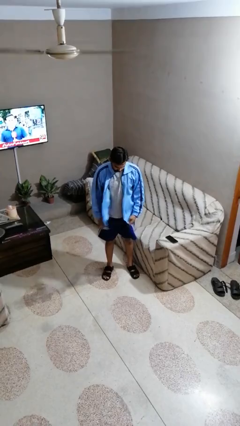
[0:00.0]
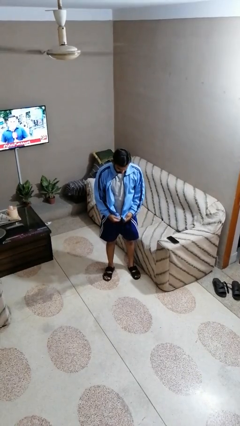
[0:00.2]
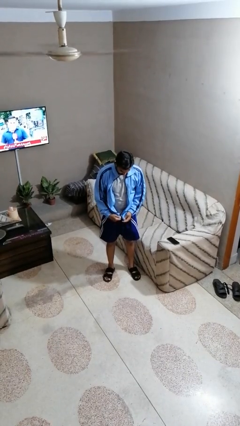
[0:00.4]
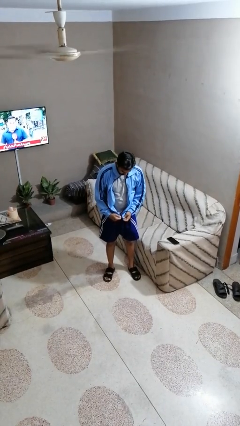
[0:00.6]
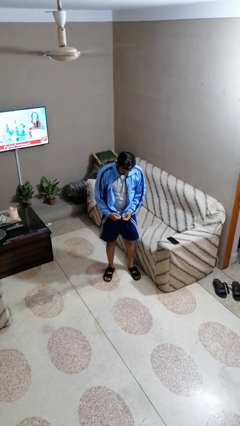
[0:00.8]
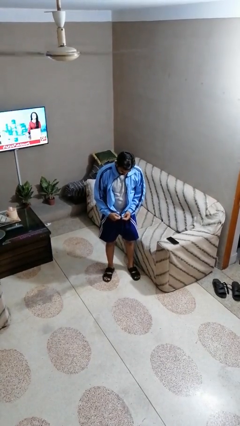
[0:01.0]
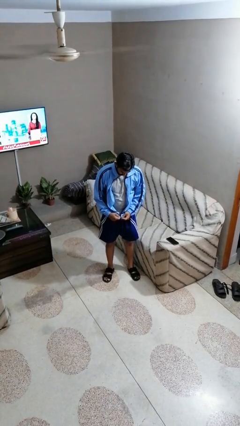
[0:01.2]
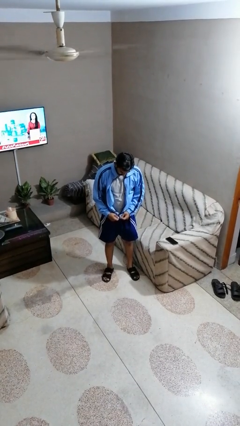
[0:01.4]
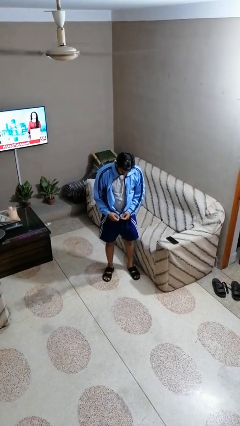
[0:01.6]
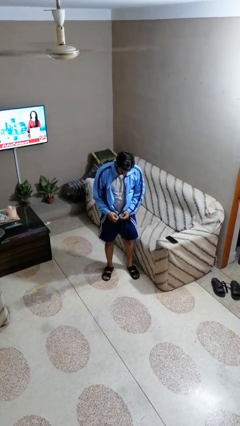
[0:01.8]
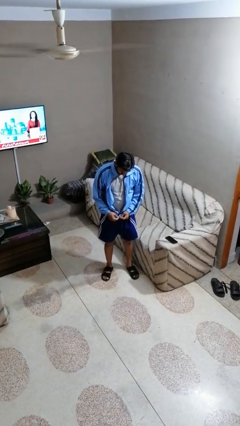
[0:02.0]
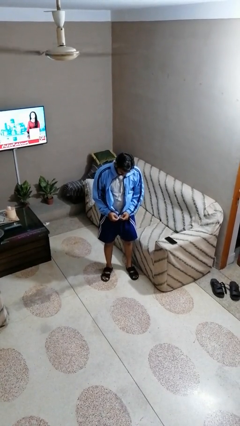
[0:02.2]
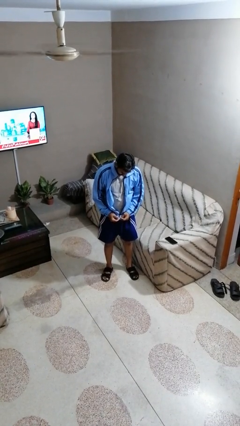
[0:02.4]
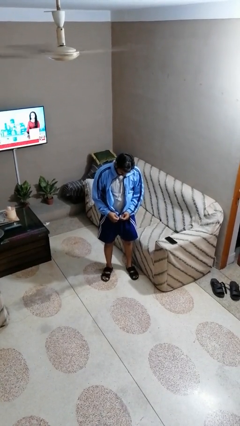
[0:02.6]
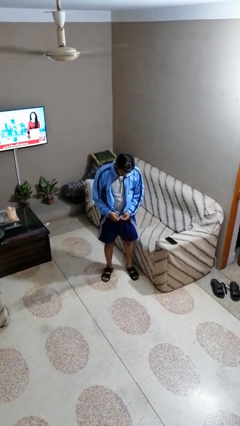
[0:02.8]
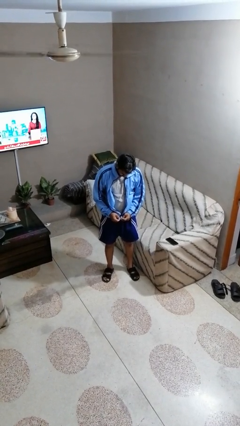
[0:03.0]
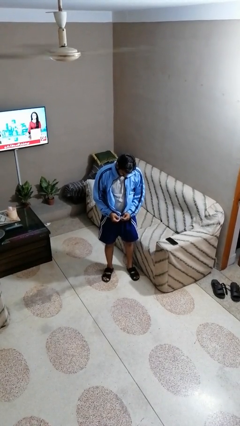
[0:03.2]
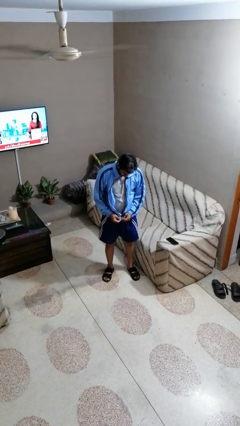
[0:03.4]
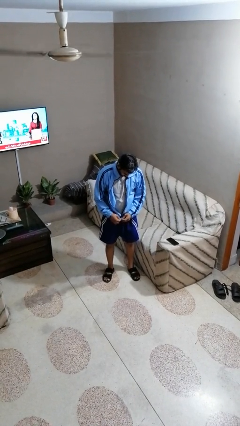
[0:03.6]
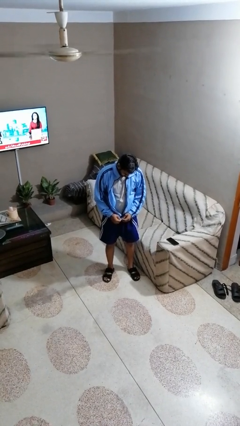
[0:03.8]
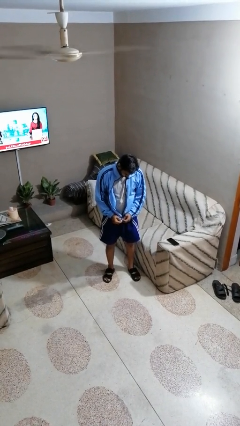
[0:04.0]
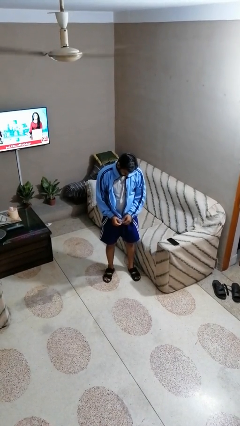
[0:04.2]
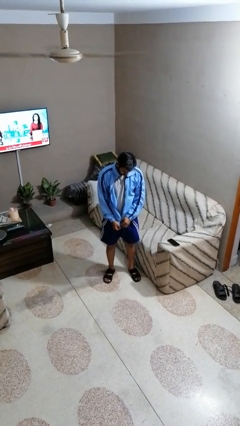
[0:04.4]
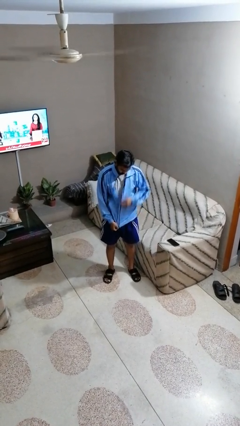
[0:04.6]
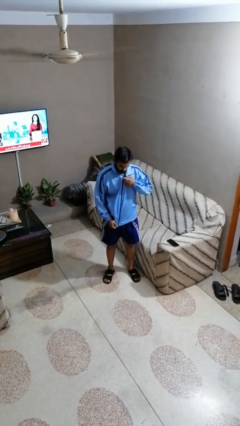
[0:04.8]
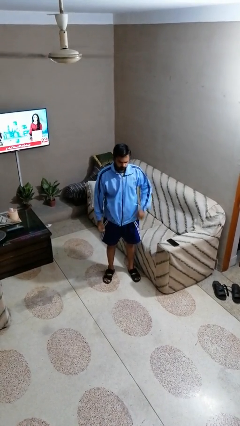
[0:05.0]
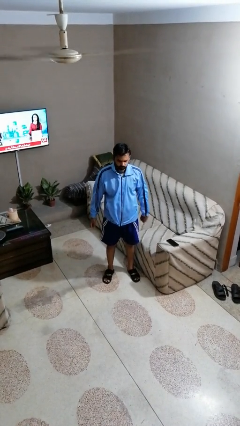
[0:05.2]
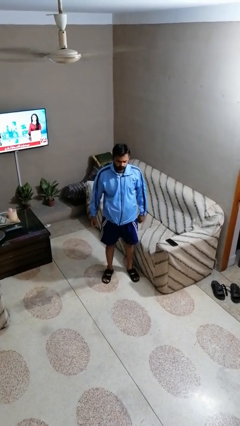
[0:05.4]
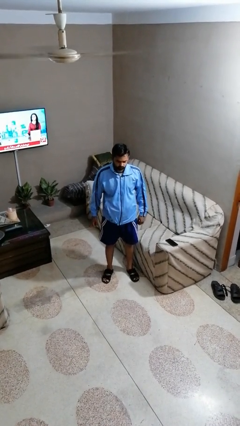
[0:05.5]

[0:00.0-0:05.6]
person zips up jacket

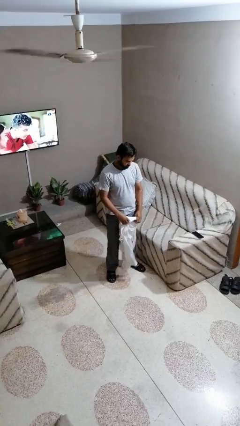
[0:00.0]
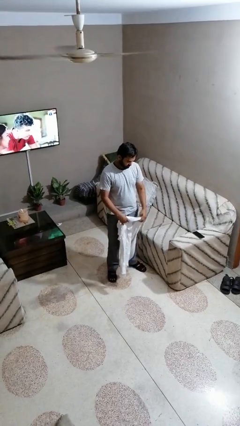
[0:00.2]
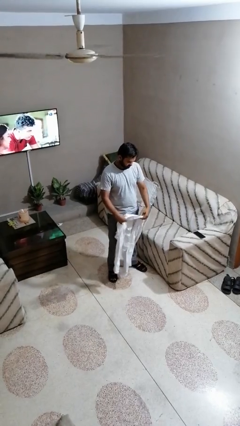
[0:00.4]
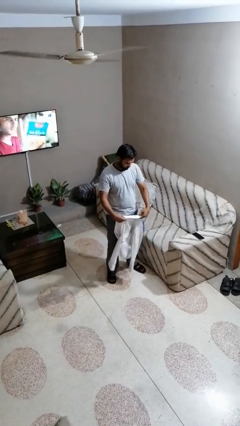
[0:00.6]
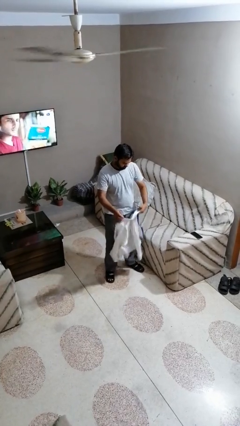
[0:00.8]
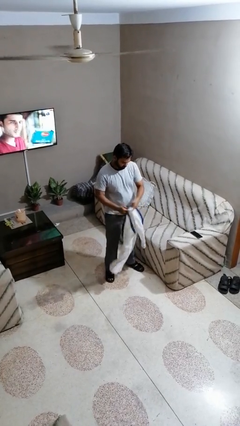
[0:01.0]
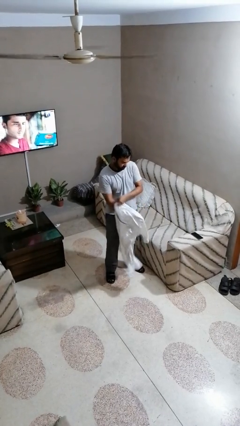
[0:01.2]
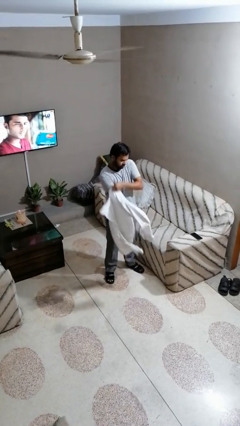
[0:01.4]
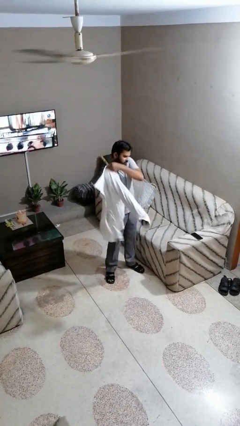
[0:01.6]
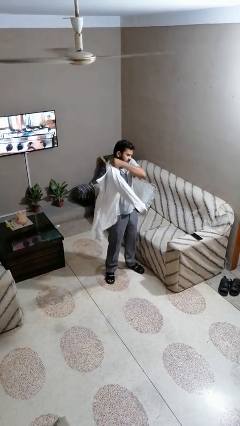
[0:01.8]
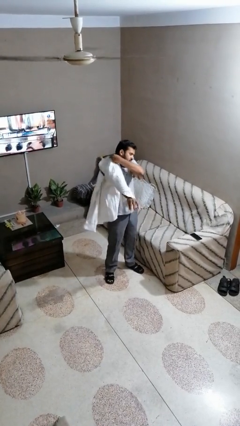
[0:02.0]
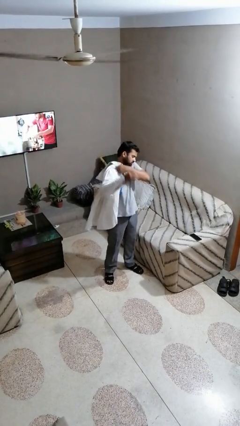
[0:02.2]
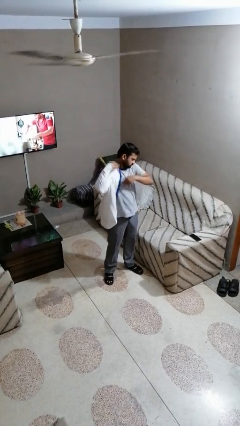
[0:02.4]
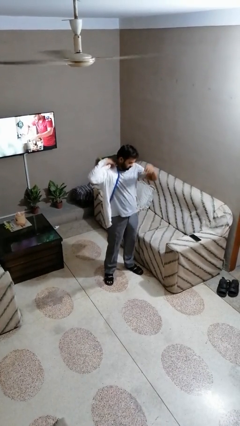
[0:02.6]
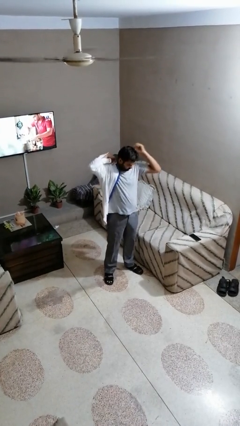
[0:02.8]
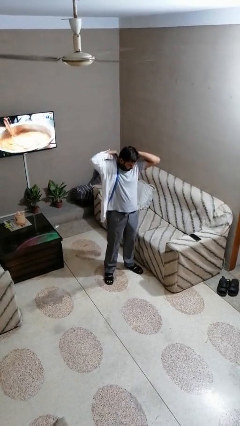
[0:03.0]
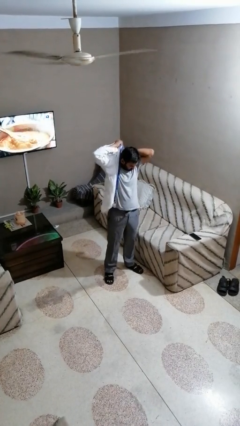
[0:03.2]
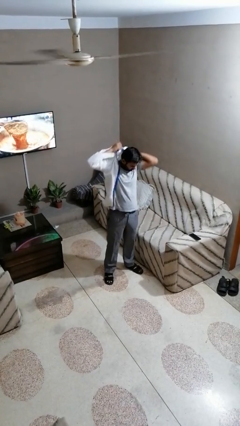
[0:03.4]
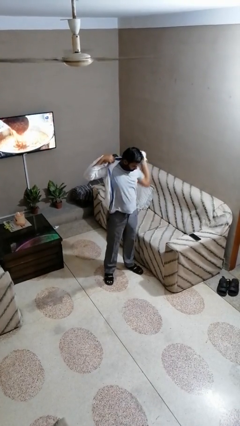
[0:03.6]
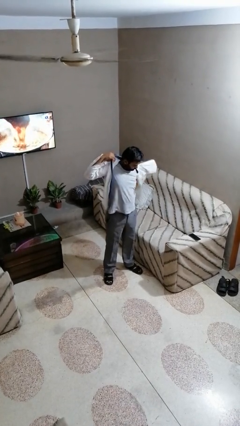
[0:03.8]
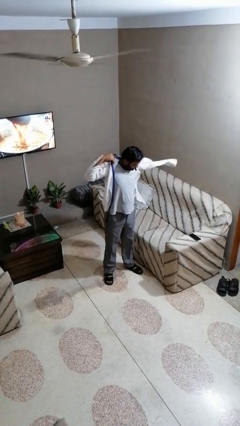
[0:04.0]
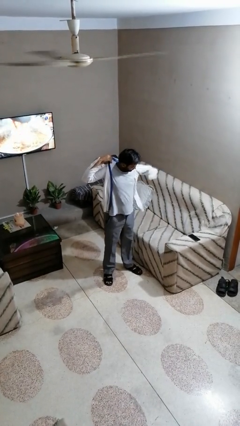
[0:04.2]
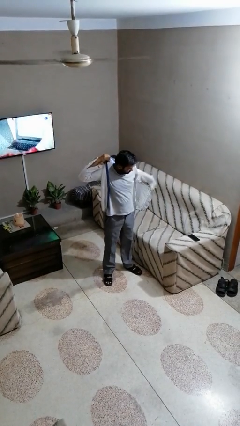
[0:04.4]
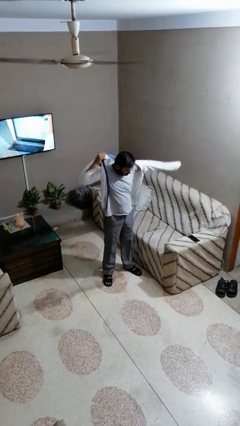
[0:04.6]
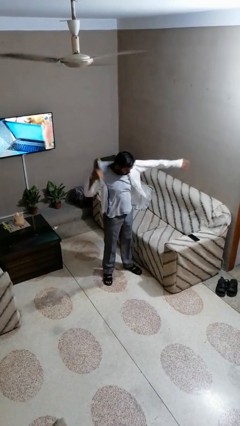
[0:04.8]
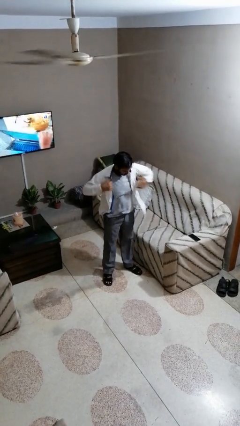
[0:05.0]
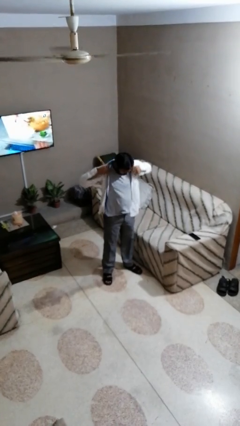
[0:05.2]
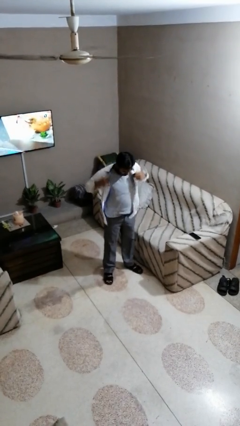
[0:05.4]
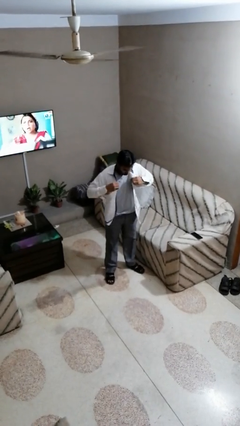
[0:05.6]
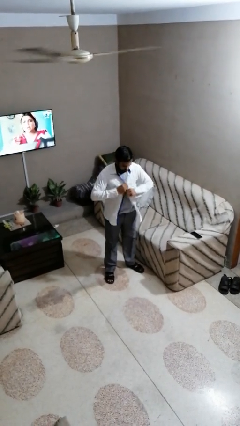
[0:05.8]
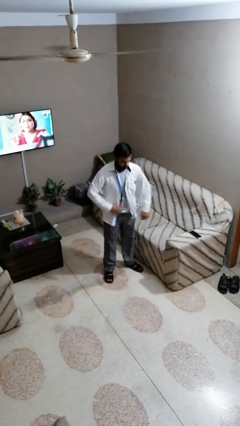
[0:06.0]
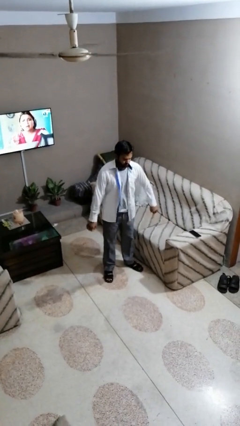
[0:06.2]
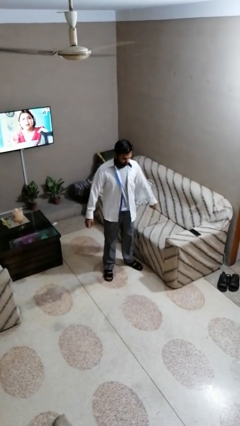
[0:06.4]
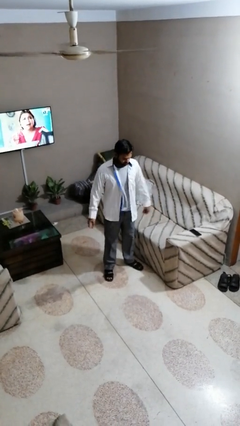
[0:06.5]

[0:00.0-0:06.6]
person puts on shirt

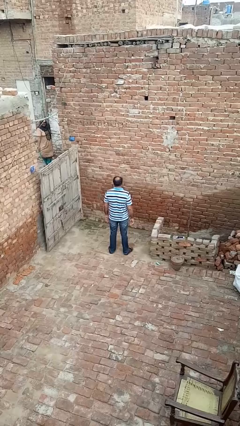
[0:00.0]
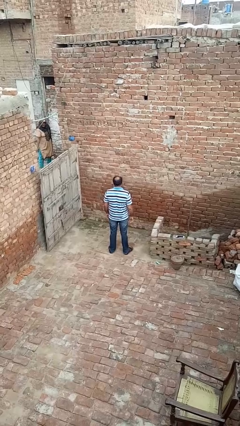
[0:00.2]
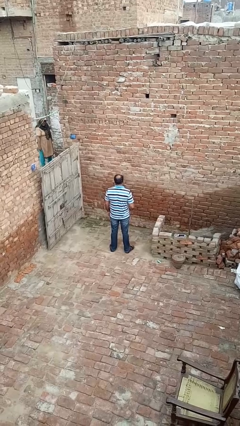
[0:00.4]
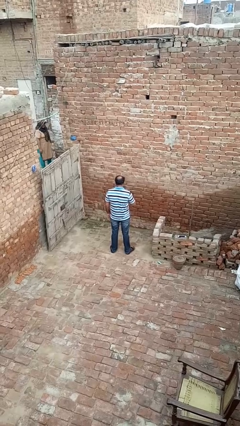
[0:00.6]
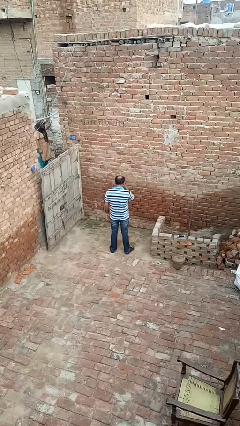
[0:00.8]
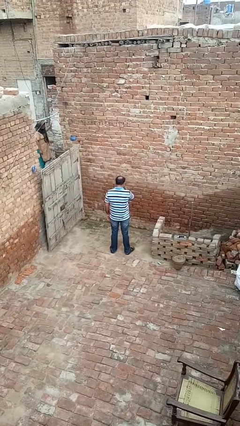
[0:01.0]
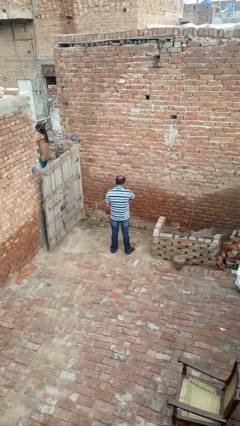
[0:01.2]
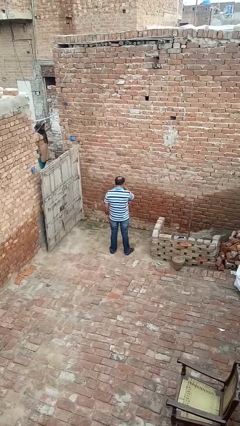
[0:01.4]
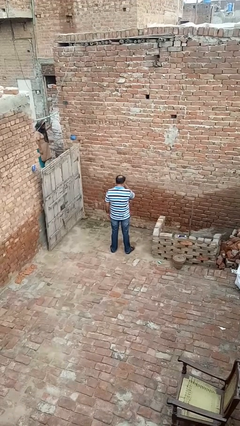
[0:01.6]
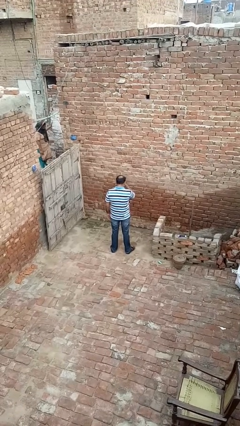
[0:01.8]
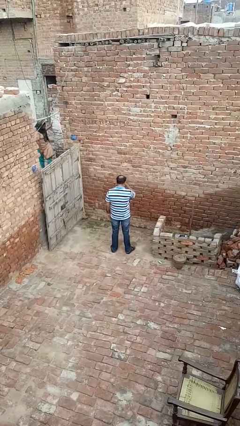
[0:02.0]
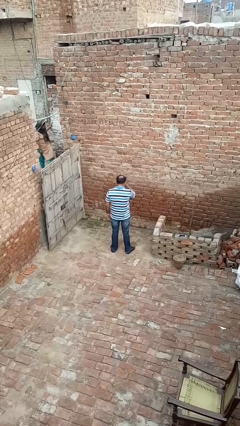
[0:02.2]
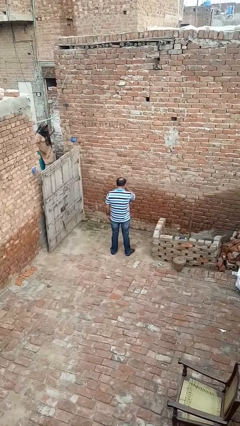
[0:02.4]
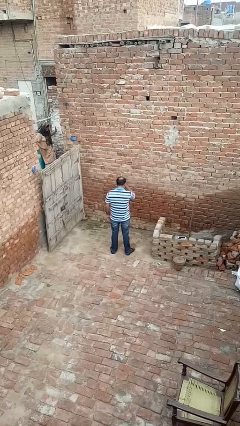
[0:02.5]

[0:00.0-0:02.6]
person rubs eyes

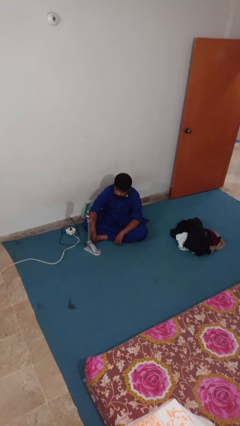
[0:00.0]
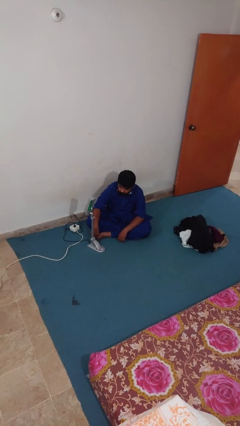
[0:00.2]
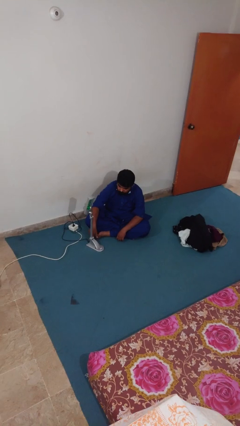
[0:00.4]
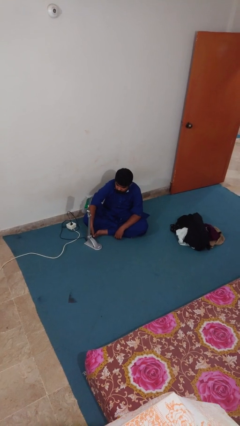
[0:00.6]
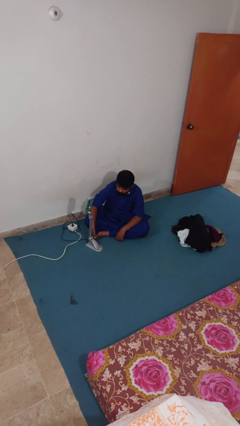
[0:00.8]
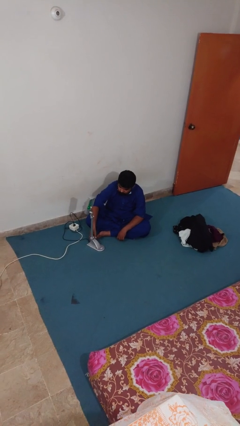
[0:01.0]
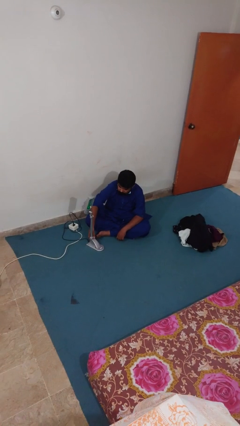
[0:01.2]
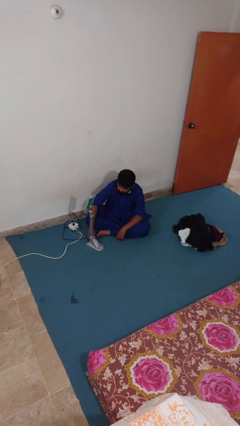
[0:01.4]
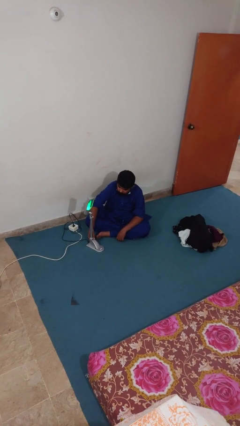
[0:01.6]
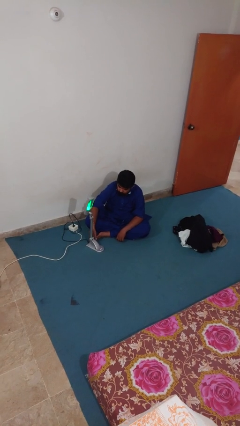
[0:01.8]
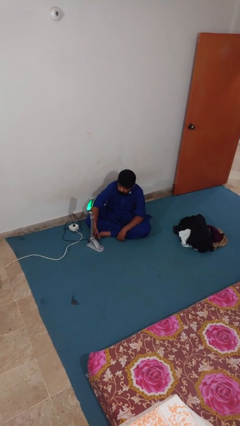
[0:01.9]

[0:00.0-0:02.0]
person turns on lamp

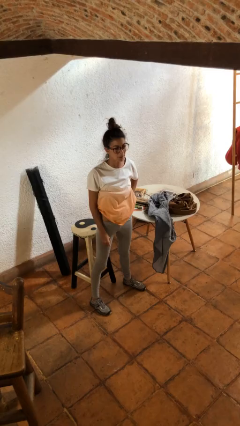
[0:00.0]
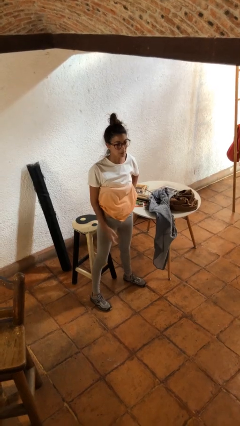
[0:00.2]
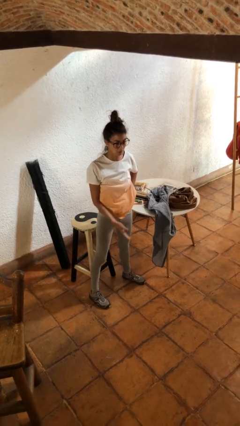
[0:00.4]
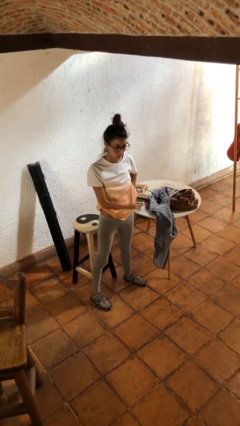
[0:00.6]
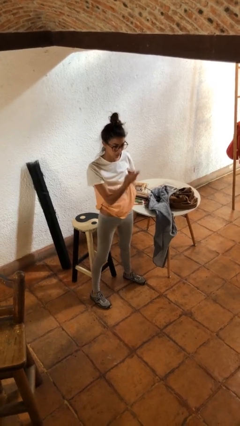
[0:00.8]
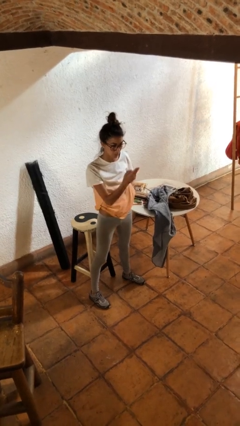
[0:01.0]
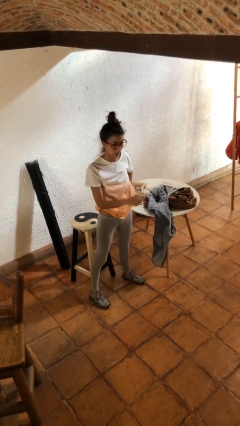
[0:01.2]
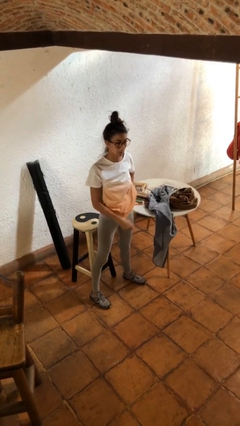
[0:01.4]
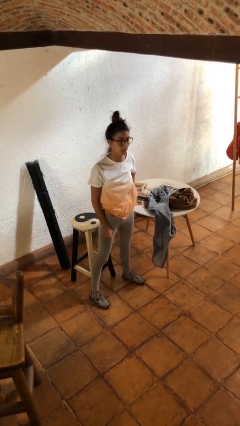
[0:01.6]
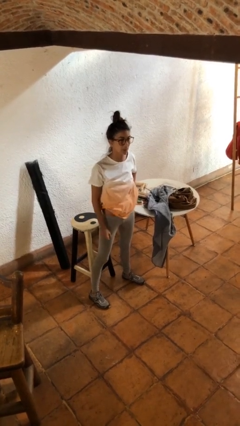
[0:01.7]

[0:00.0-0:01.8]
person gestures swipe up
